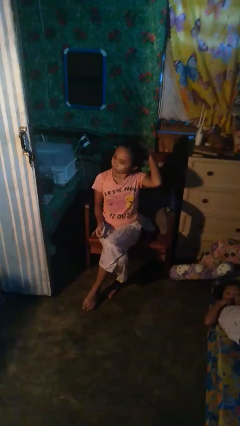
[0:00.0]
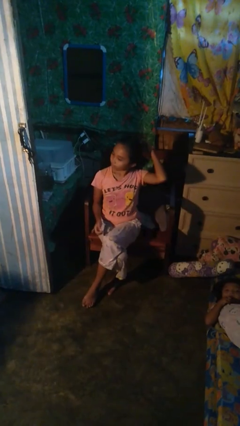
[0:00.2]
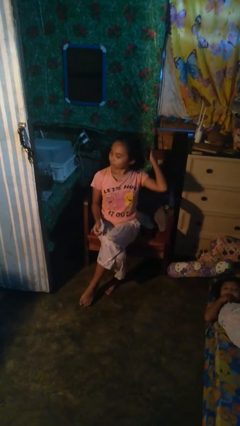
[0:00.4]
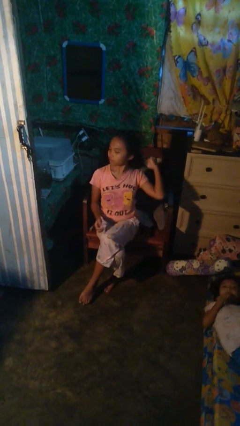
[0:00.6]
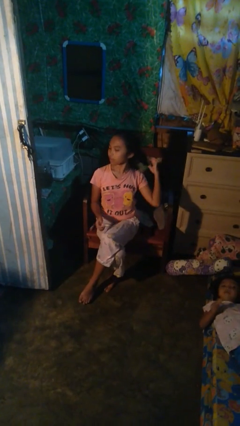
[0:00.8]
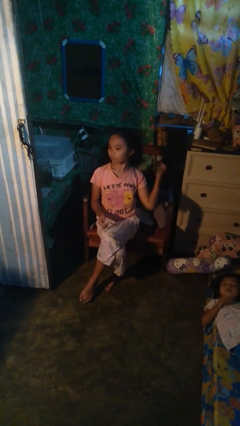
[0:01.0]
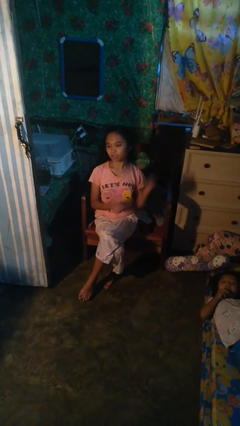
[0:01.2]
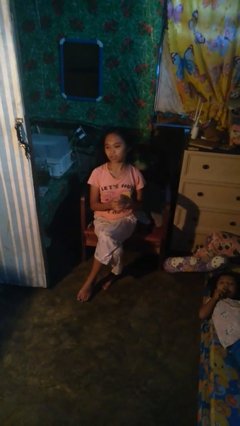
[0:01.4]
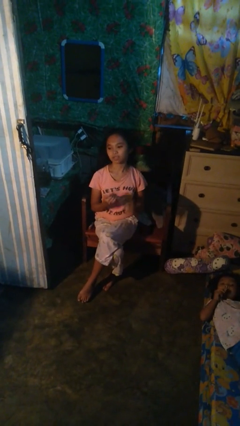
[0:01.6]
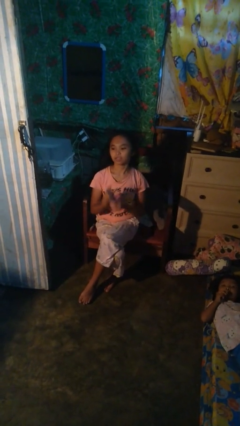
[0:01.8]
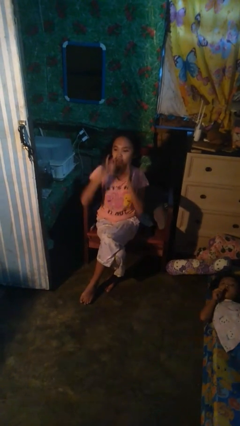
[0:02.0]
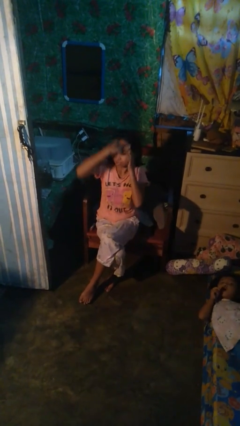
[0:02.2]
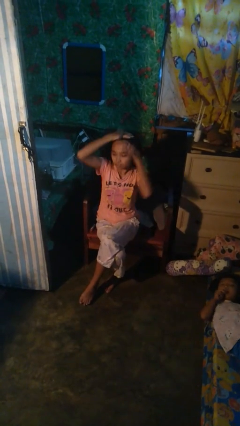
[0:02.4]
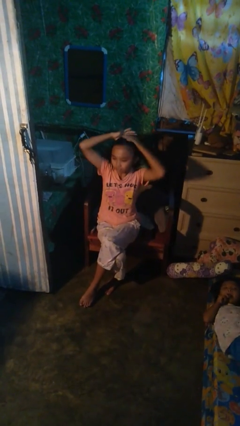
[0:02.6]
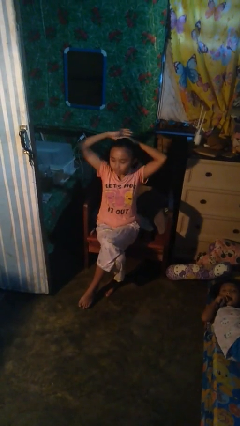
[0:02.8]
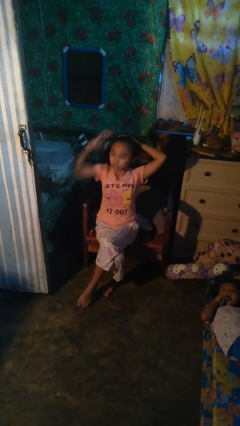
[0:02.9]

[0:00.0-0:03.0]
person takes off hairtie

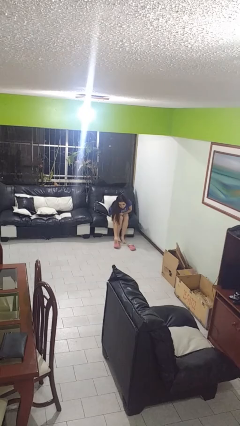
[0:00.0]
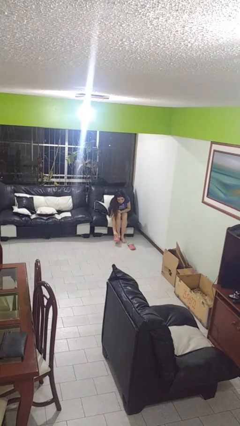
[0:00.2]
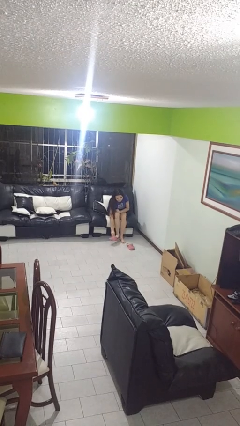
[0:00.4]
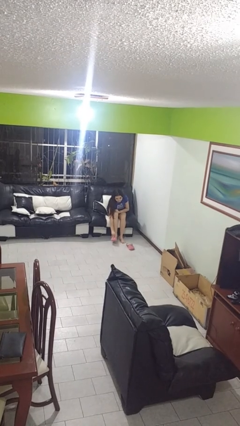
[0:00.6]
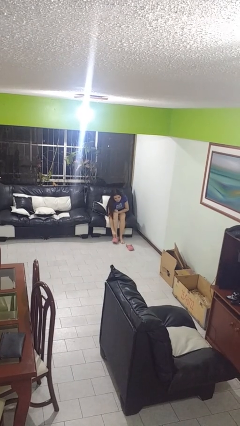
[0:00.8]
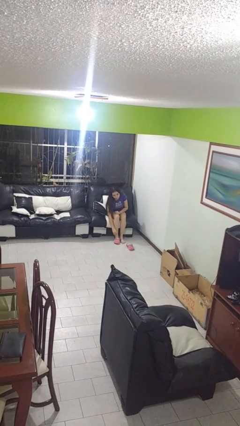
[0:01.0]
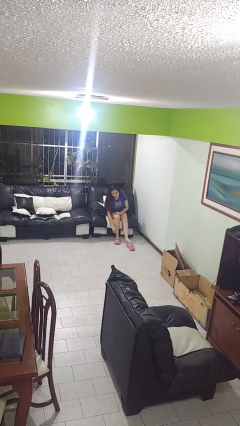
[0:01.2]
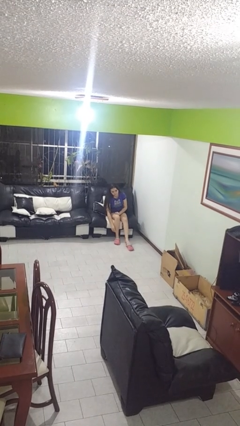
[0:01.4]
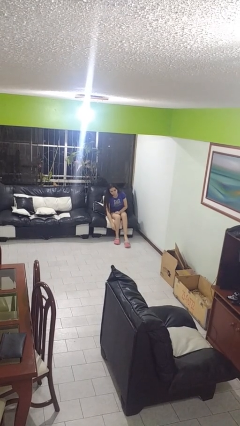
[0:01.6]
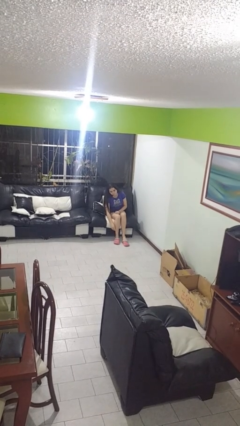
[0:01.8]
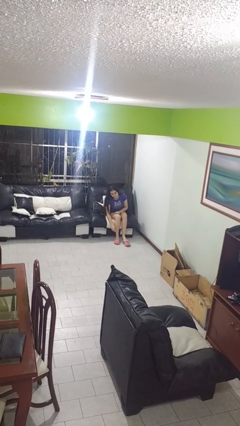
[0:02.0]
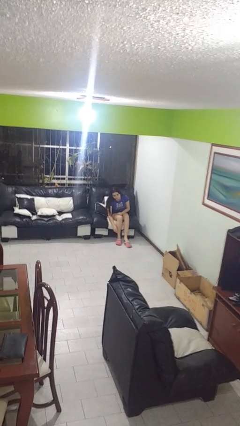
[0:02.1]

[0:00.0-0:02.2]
person puts on shoes

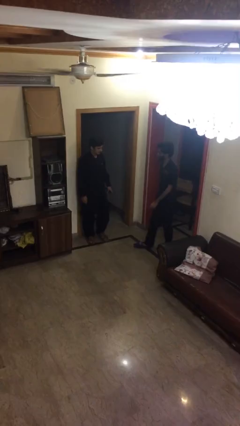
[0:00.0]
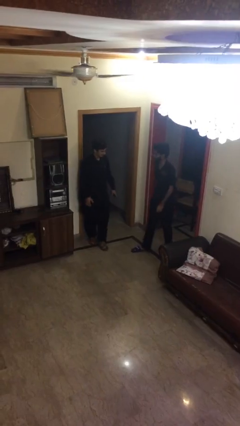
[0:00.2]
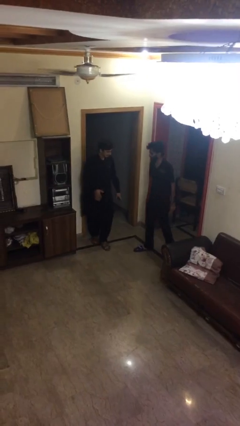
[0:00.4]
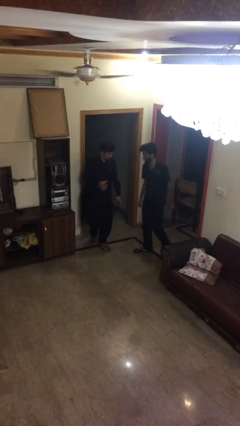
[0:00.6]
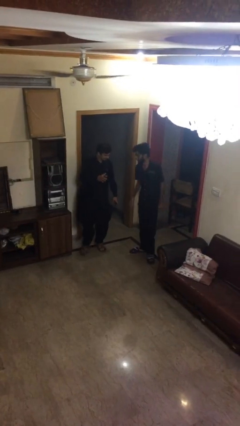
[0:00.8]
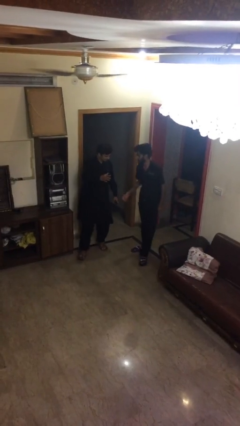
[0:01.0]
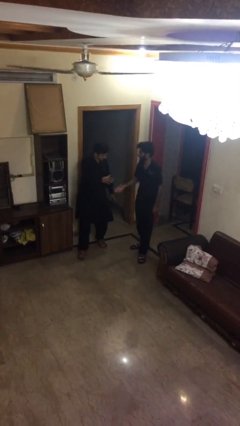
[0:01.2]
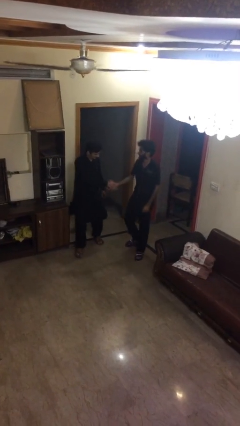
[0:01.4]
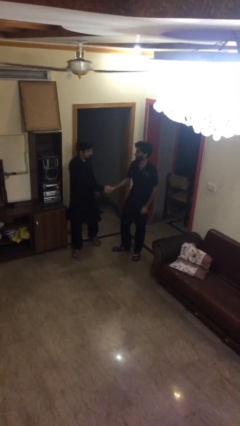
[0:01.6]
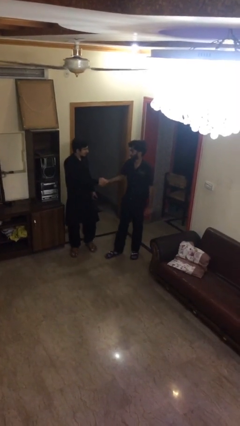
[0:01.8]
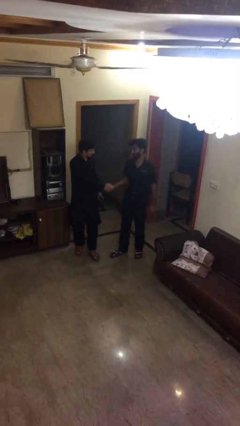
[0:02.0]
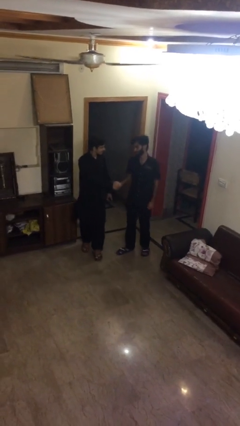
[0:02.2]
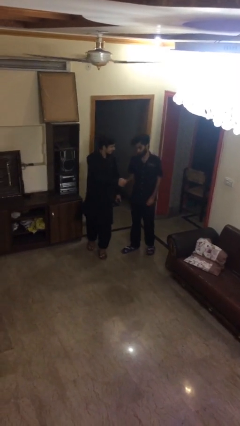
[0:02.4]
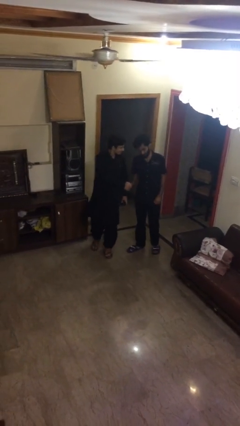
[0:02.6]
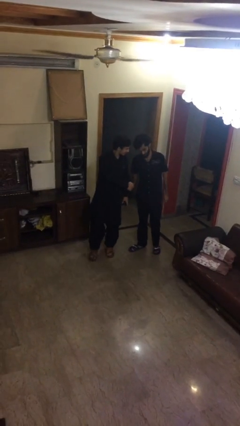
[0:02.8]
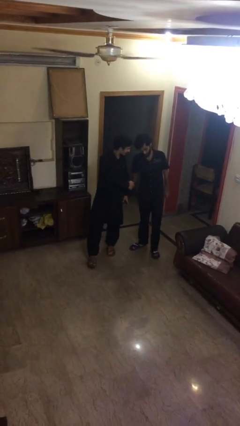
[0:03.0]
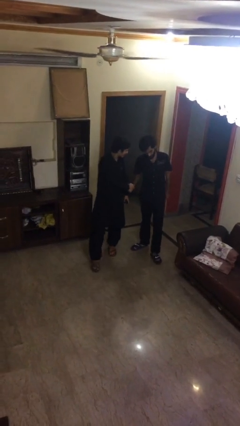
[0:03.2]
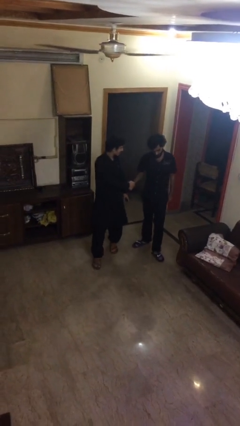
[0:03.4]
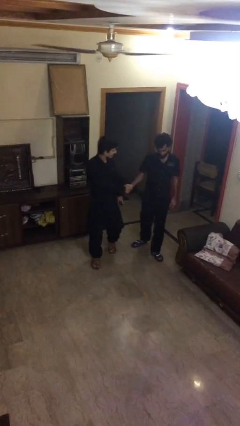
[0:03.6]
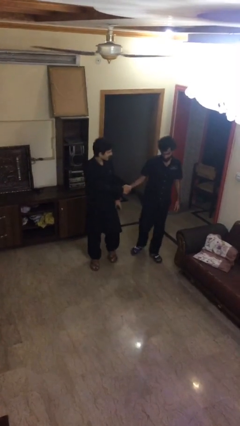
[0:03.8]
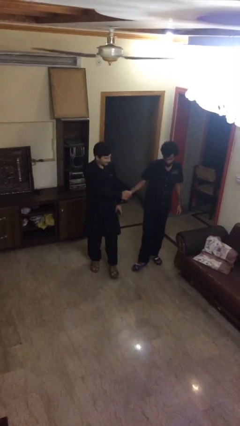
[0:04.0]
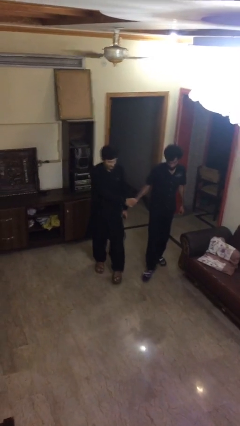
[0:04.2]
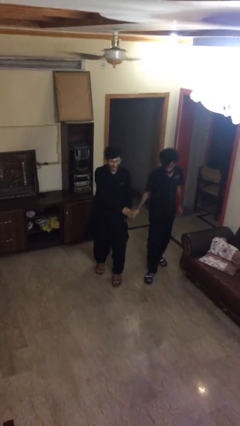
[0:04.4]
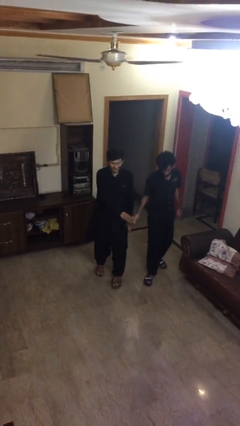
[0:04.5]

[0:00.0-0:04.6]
person shakes hand

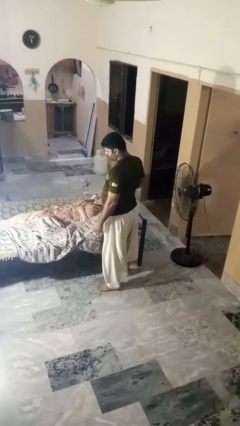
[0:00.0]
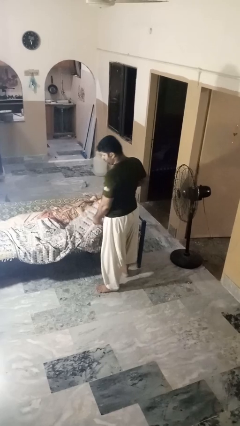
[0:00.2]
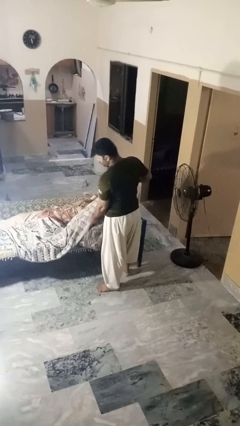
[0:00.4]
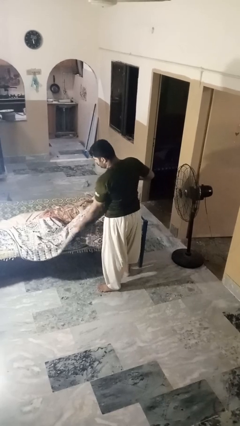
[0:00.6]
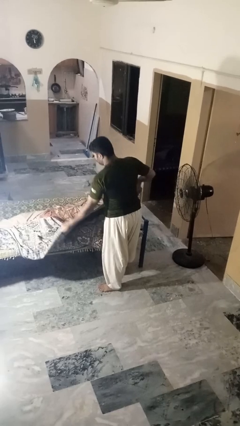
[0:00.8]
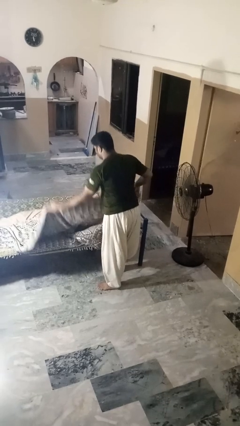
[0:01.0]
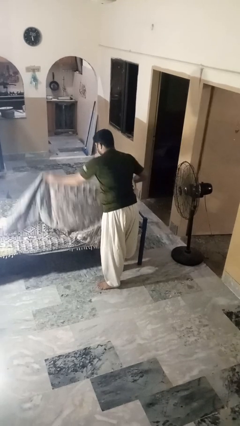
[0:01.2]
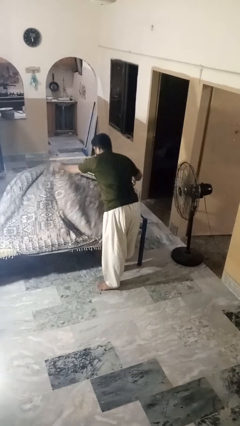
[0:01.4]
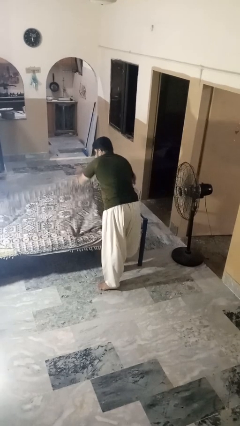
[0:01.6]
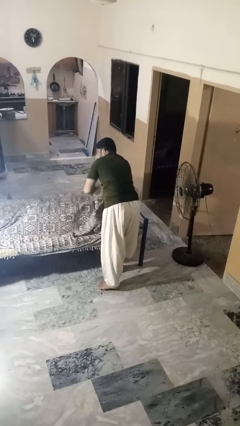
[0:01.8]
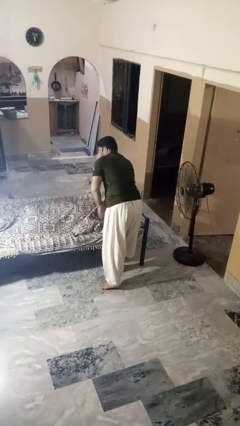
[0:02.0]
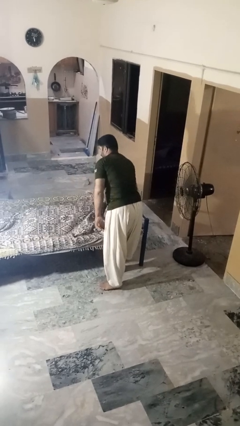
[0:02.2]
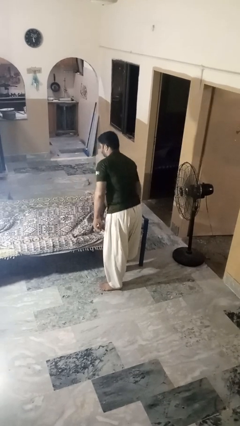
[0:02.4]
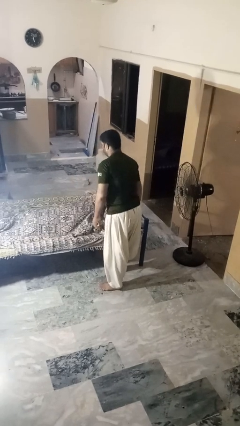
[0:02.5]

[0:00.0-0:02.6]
person covers friend with blanket

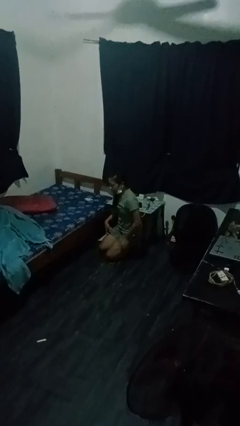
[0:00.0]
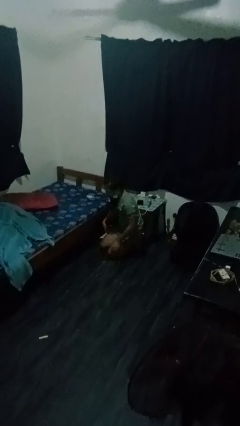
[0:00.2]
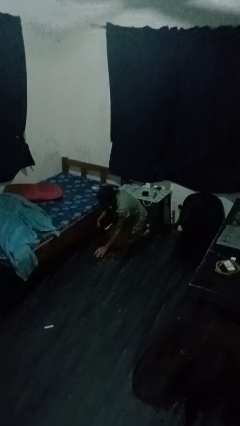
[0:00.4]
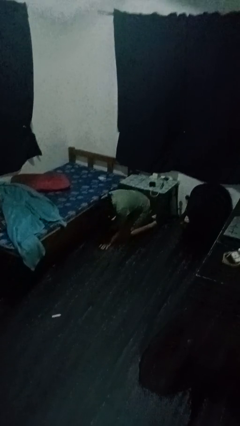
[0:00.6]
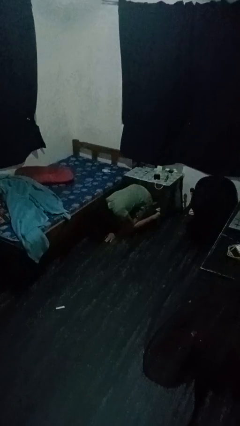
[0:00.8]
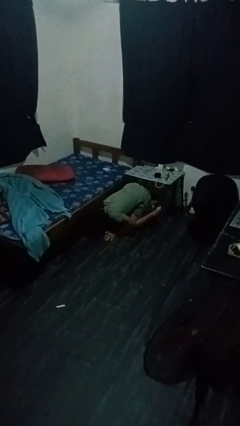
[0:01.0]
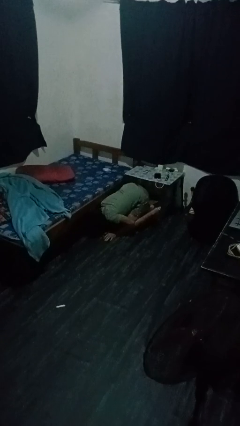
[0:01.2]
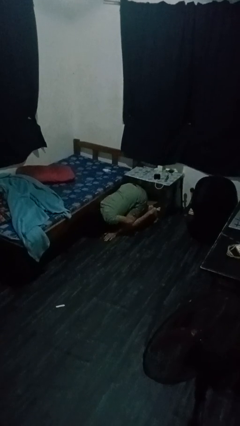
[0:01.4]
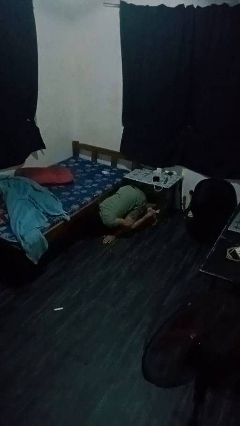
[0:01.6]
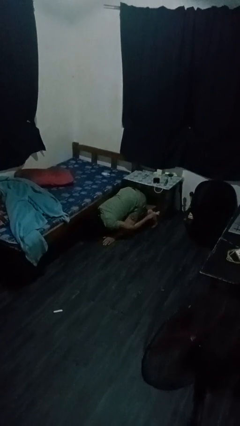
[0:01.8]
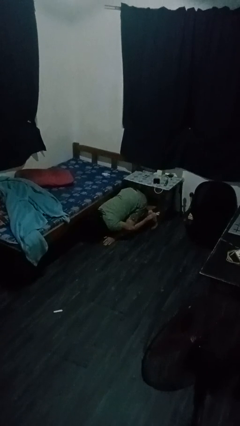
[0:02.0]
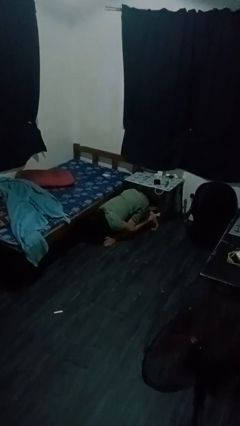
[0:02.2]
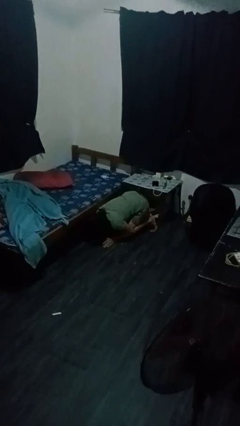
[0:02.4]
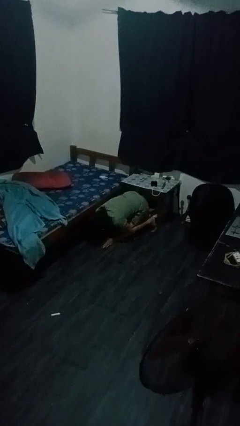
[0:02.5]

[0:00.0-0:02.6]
person searches under bed

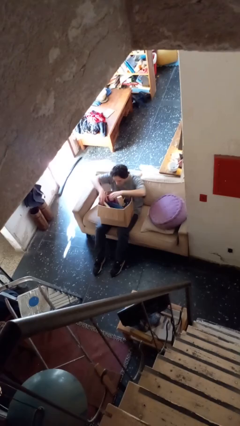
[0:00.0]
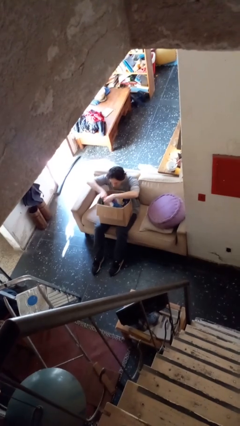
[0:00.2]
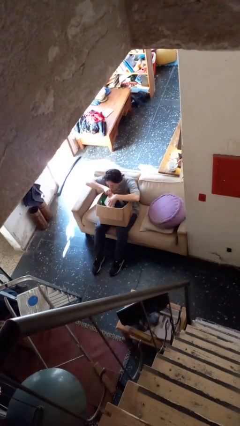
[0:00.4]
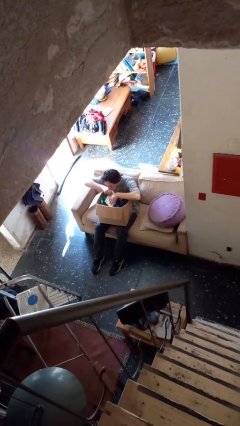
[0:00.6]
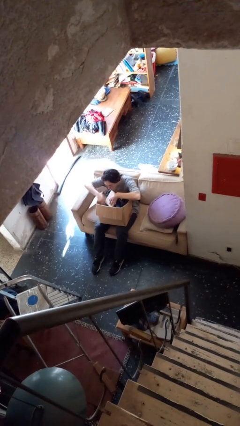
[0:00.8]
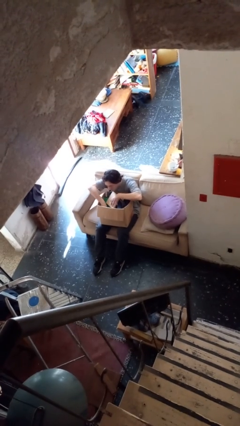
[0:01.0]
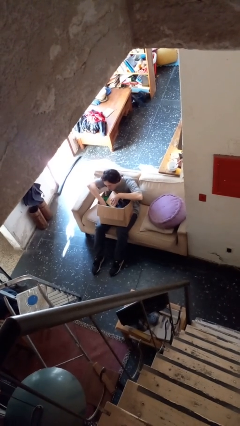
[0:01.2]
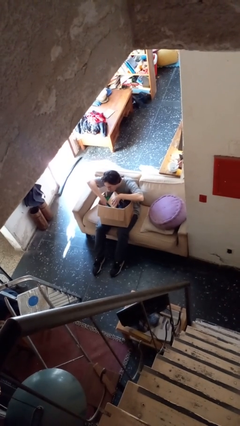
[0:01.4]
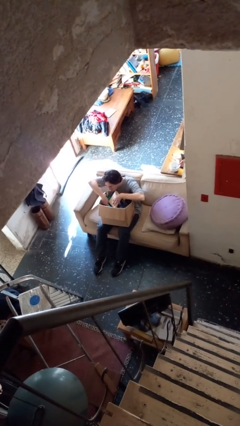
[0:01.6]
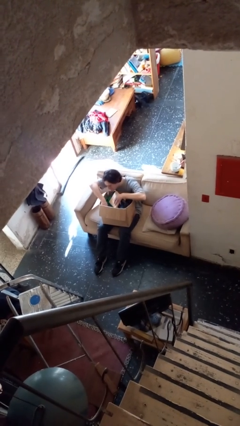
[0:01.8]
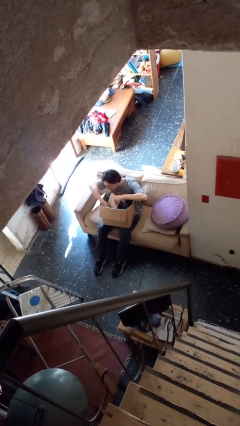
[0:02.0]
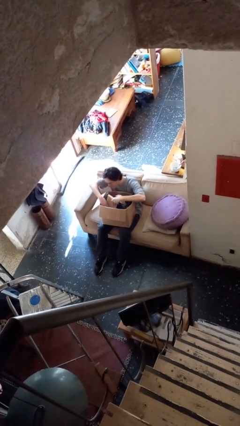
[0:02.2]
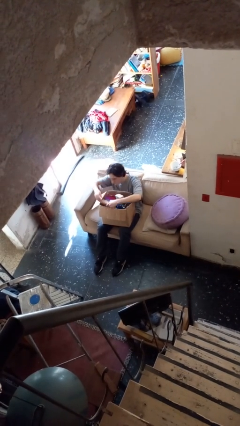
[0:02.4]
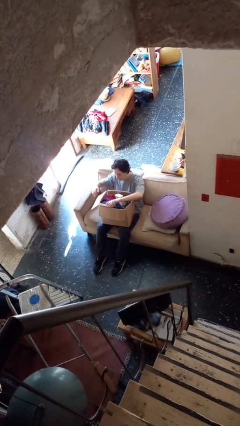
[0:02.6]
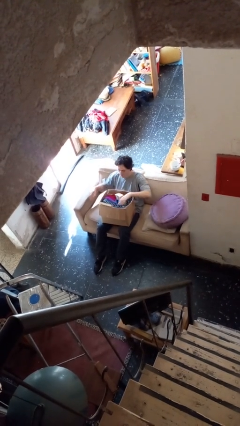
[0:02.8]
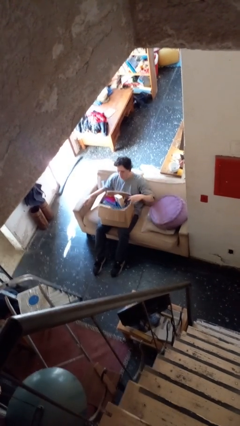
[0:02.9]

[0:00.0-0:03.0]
person searches in box
